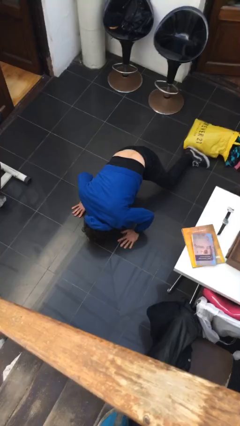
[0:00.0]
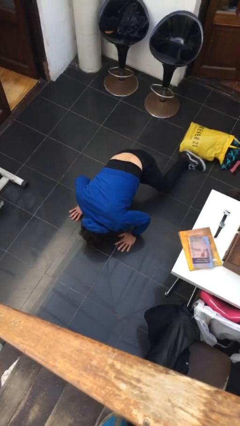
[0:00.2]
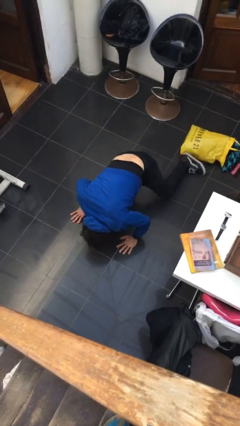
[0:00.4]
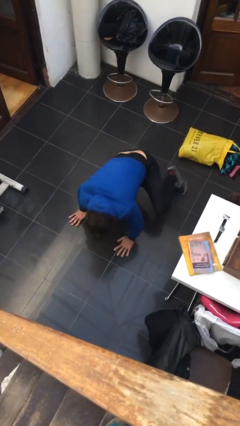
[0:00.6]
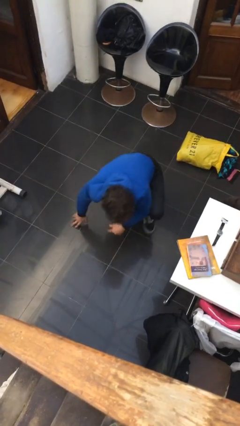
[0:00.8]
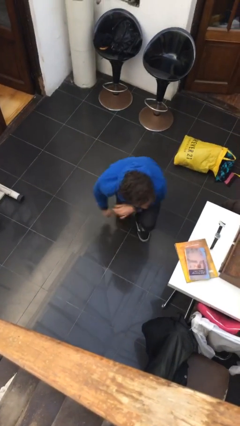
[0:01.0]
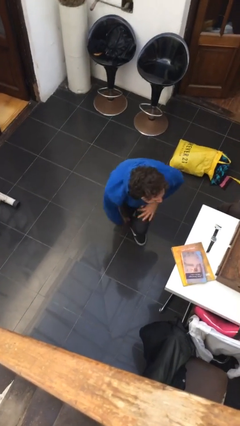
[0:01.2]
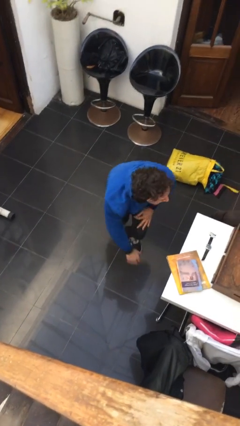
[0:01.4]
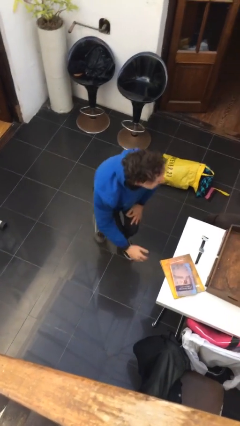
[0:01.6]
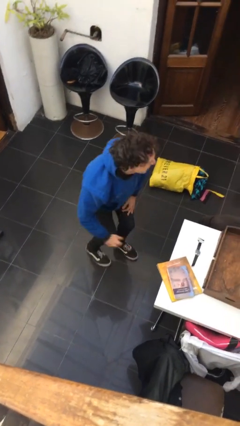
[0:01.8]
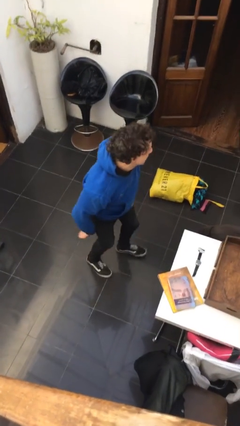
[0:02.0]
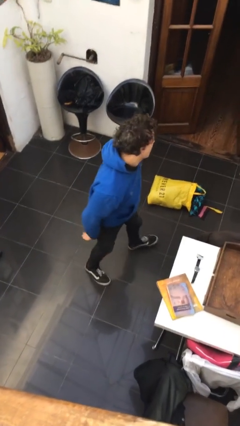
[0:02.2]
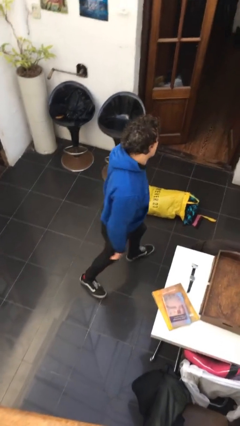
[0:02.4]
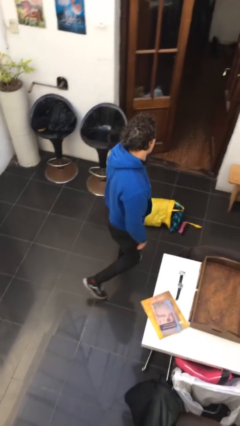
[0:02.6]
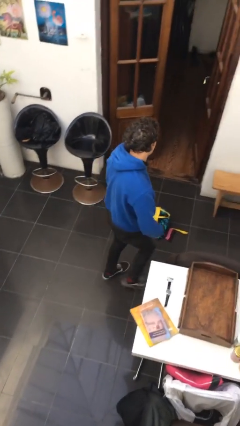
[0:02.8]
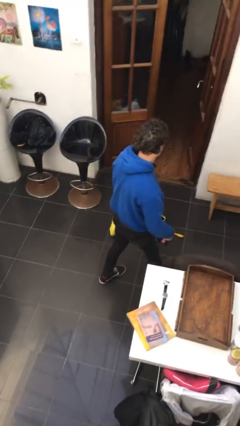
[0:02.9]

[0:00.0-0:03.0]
person stands up from floor

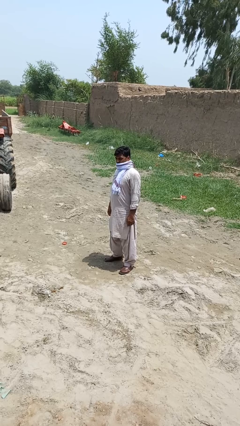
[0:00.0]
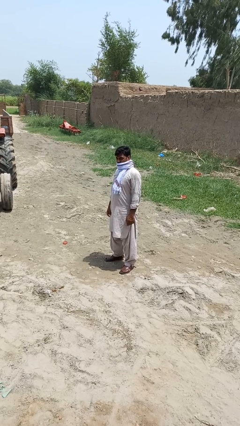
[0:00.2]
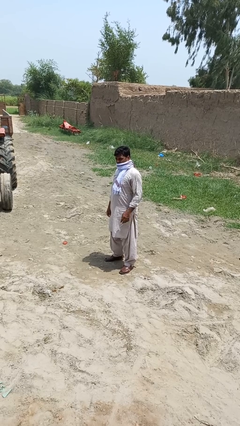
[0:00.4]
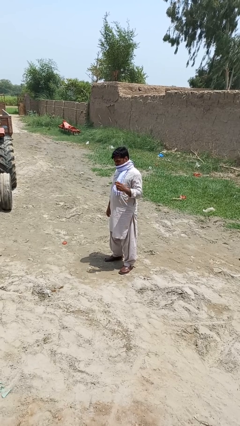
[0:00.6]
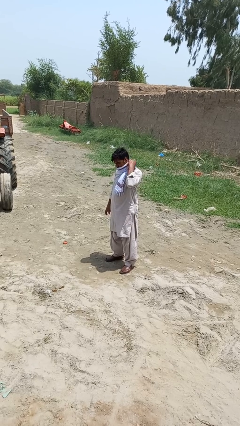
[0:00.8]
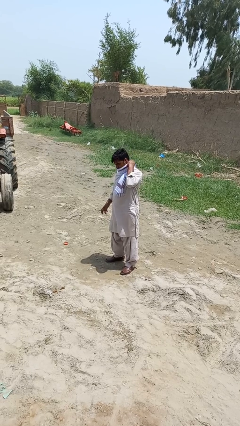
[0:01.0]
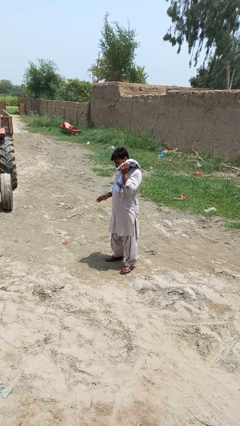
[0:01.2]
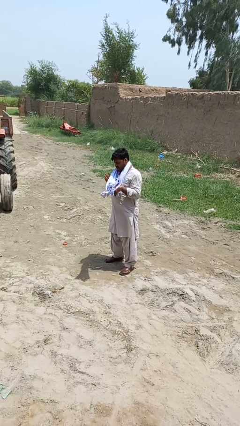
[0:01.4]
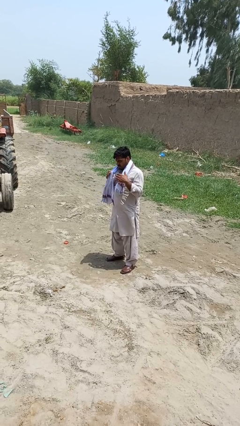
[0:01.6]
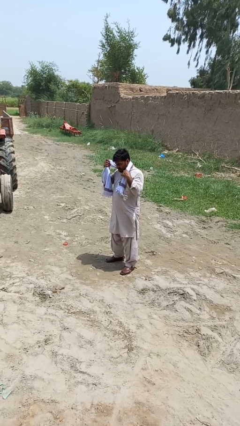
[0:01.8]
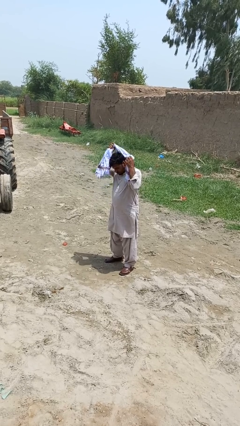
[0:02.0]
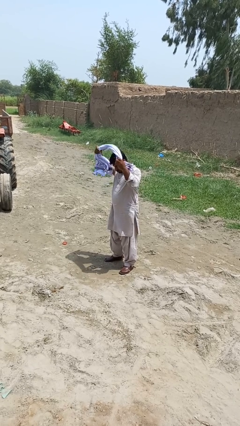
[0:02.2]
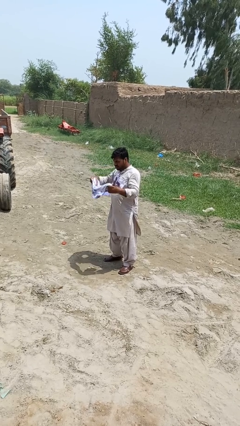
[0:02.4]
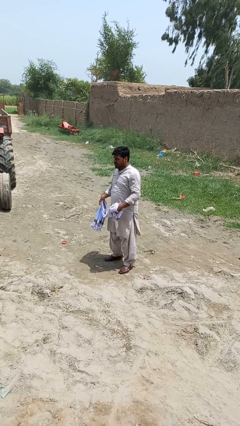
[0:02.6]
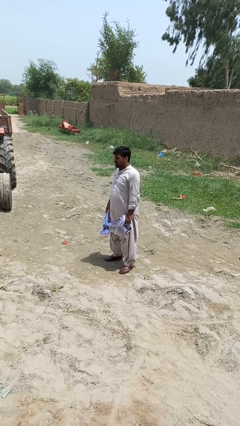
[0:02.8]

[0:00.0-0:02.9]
person takes off scarf

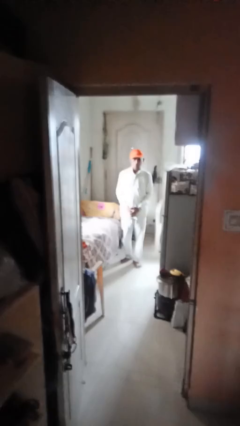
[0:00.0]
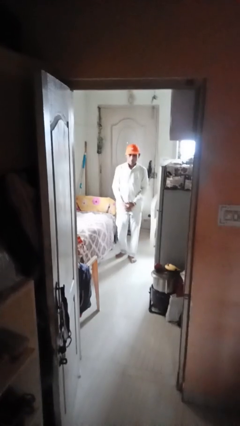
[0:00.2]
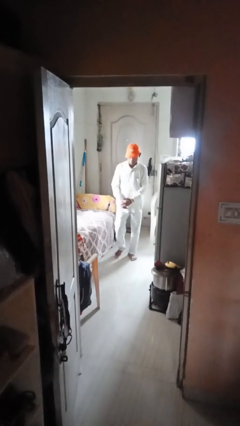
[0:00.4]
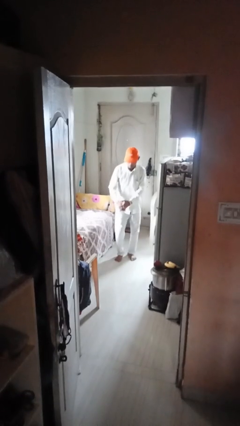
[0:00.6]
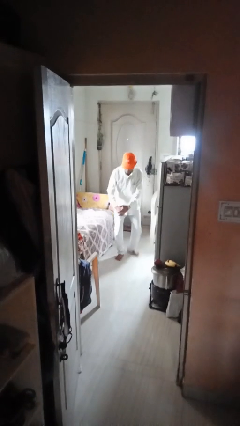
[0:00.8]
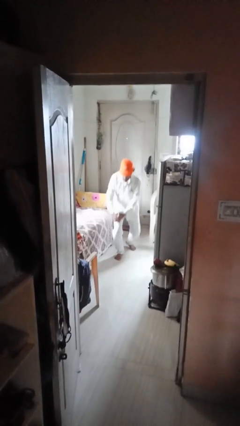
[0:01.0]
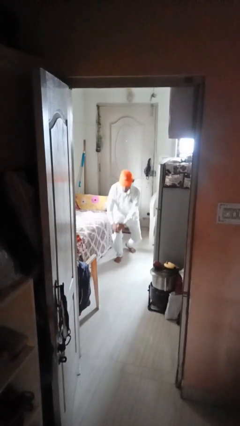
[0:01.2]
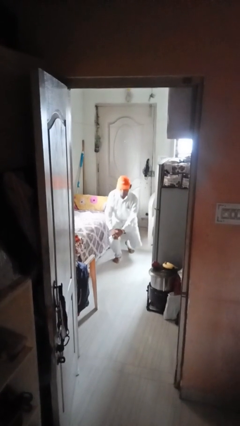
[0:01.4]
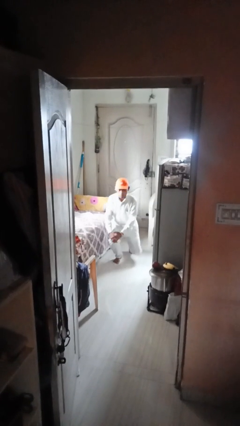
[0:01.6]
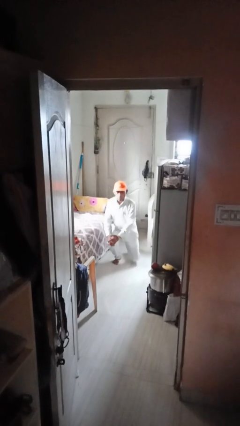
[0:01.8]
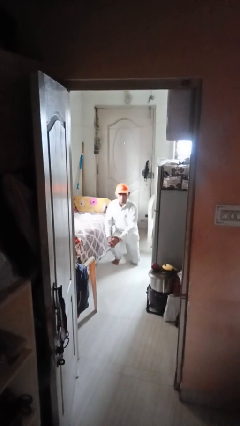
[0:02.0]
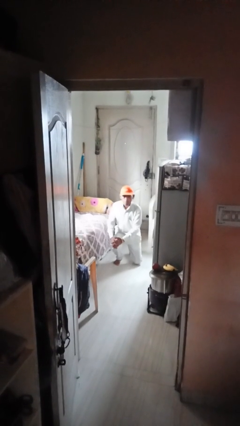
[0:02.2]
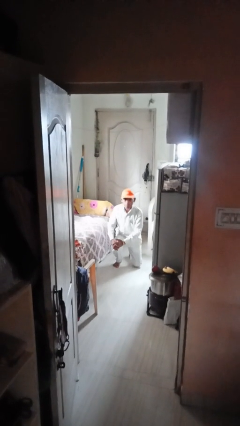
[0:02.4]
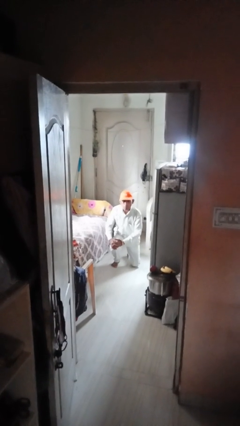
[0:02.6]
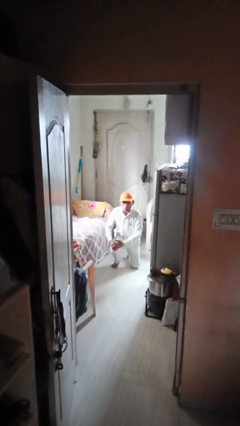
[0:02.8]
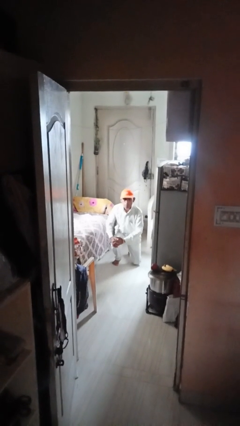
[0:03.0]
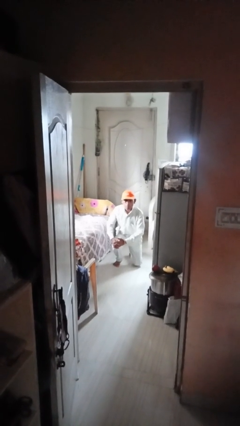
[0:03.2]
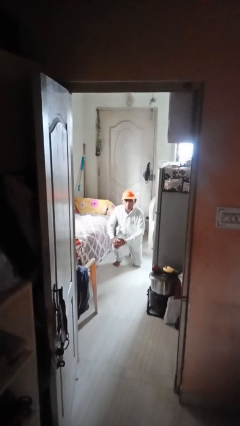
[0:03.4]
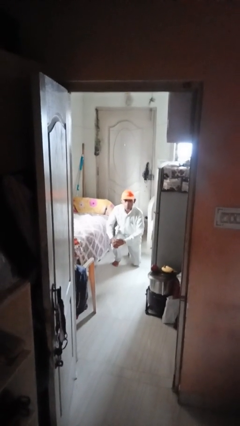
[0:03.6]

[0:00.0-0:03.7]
person exercises with lunges

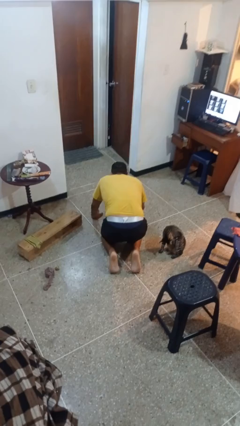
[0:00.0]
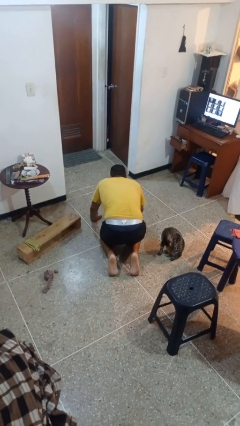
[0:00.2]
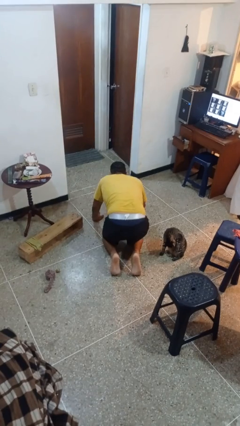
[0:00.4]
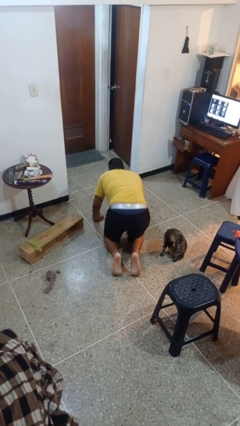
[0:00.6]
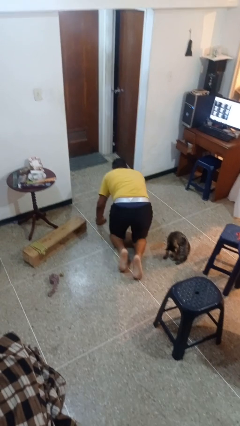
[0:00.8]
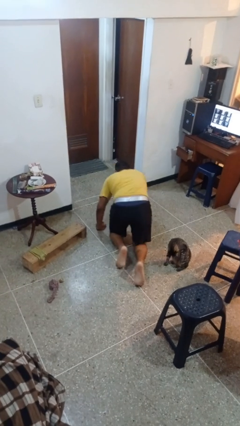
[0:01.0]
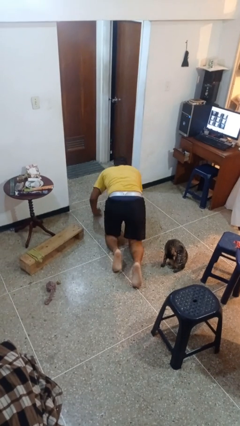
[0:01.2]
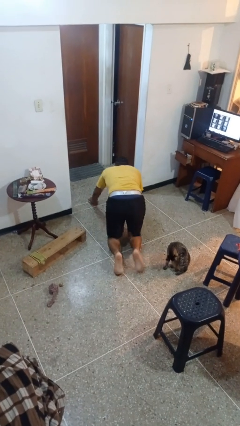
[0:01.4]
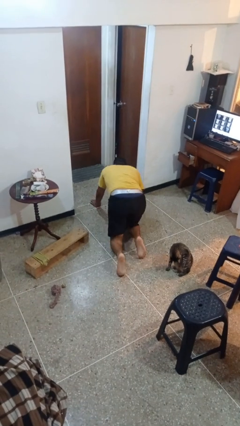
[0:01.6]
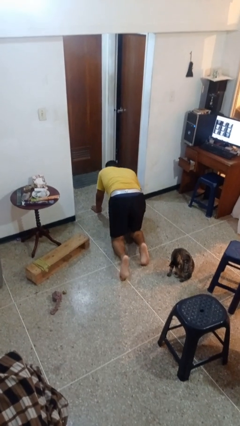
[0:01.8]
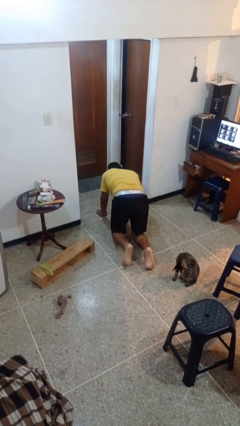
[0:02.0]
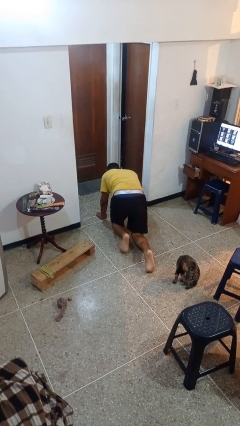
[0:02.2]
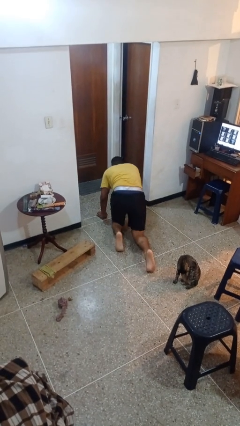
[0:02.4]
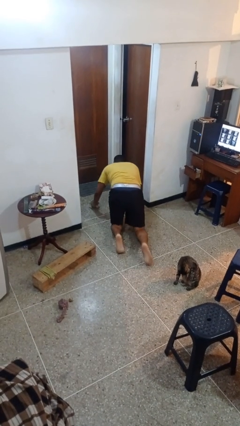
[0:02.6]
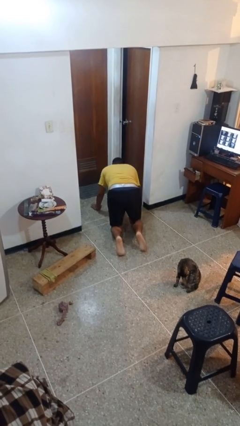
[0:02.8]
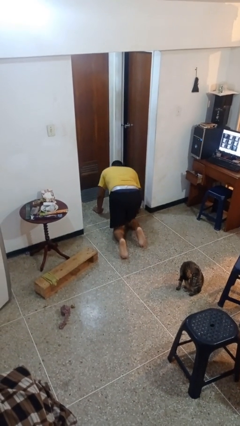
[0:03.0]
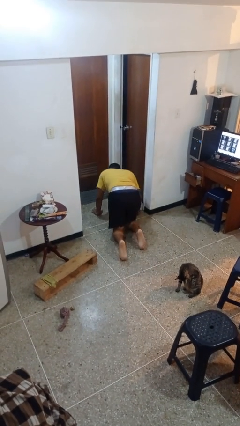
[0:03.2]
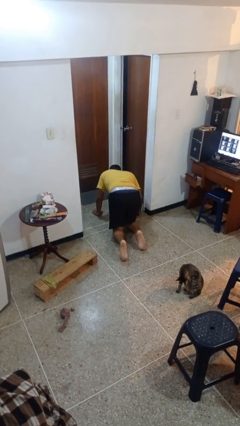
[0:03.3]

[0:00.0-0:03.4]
person crawls

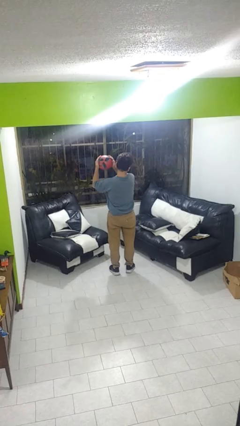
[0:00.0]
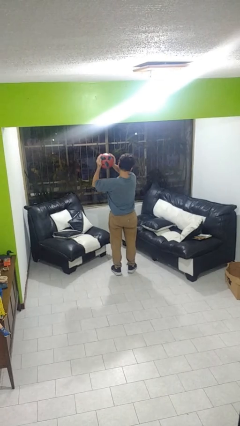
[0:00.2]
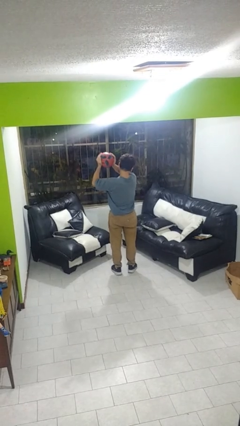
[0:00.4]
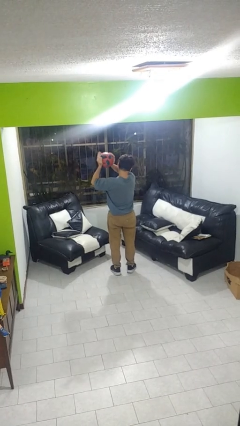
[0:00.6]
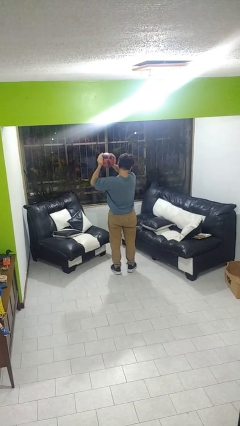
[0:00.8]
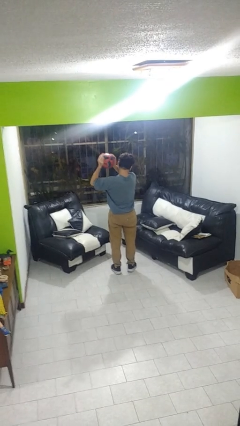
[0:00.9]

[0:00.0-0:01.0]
person squeezes object

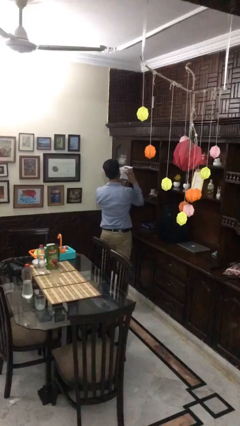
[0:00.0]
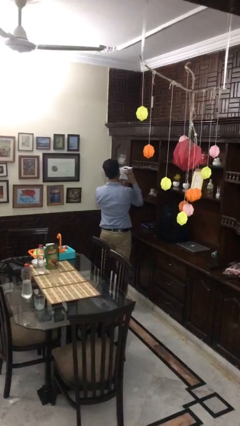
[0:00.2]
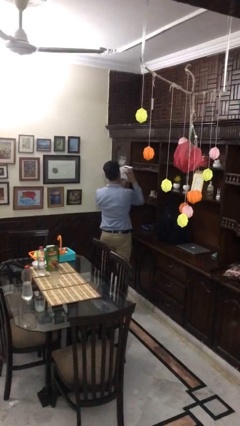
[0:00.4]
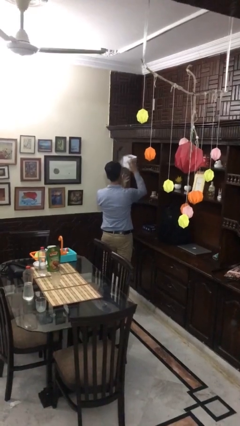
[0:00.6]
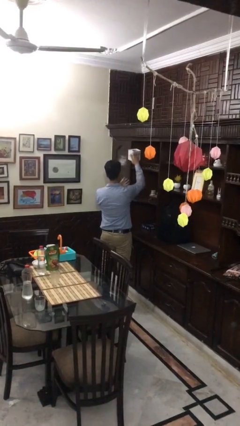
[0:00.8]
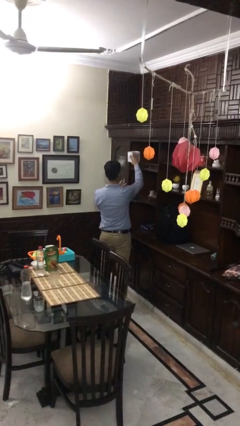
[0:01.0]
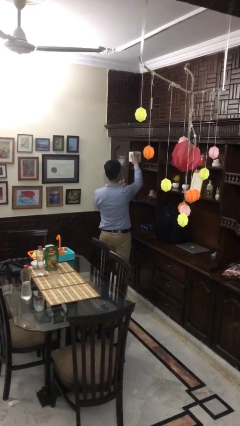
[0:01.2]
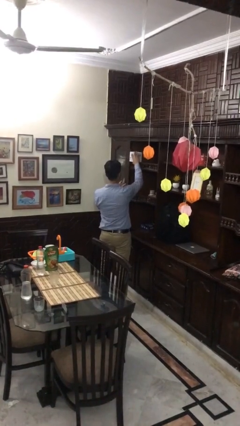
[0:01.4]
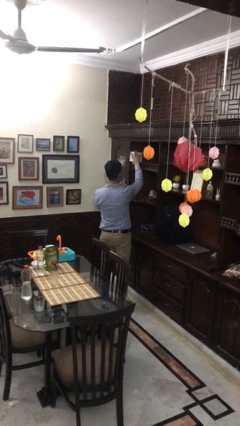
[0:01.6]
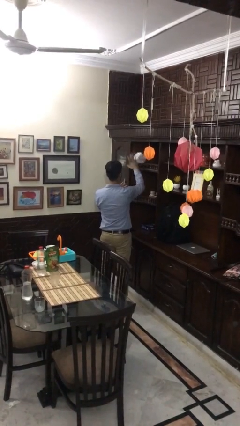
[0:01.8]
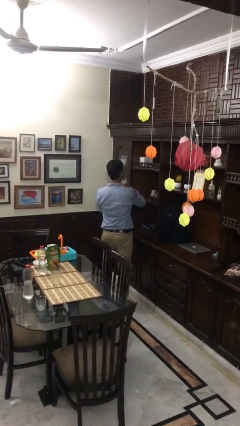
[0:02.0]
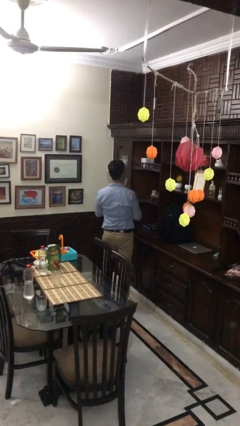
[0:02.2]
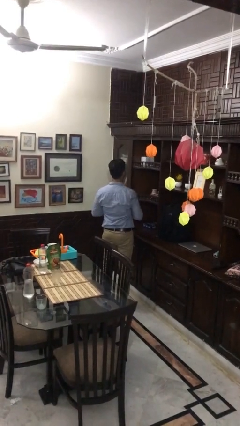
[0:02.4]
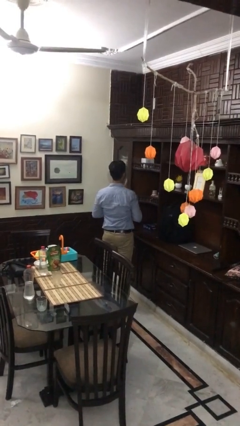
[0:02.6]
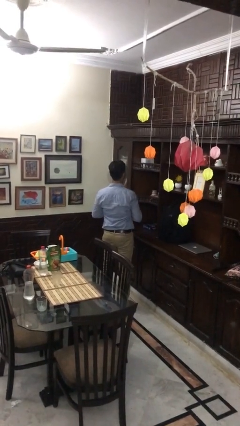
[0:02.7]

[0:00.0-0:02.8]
person puts down object on shelf

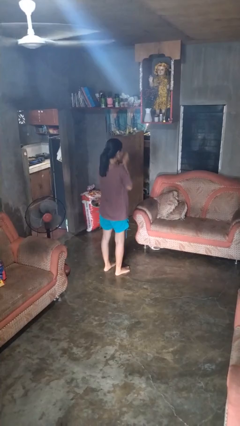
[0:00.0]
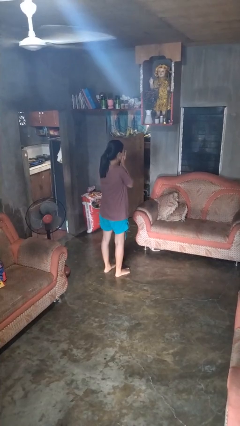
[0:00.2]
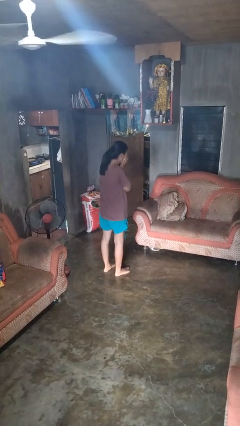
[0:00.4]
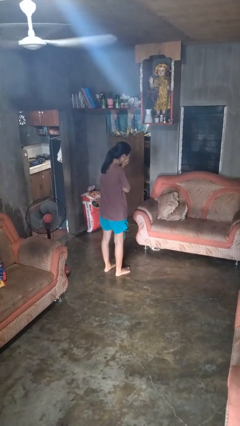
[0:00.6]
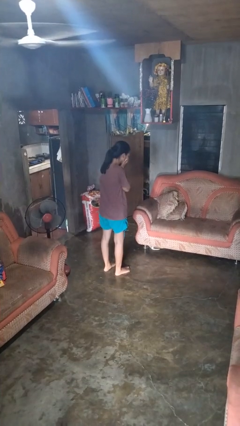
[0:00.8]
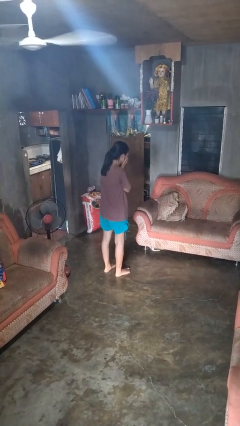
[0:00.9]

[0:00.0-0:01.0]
person sneezes into hand
